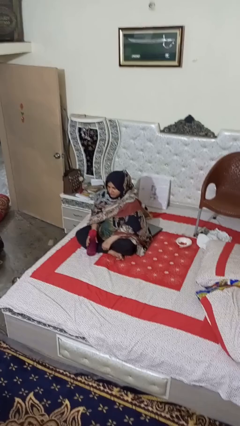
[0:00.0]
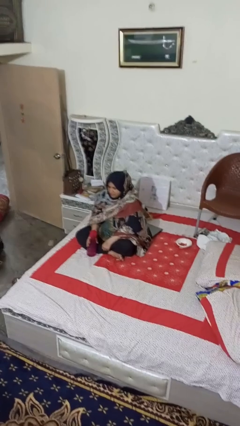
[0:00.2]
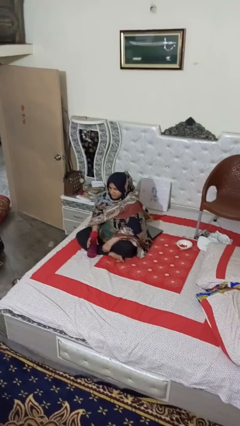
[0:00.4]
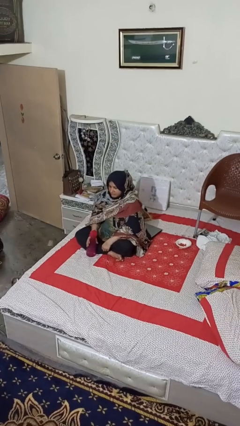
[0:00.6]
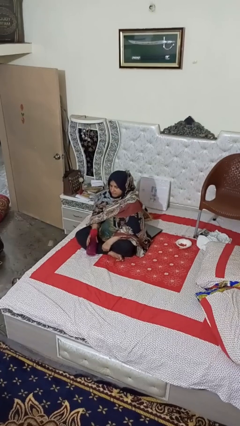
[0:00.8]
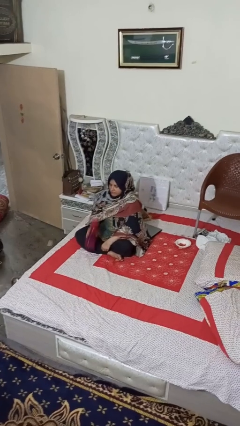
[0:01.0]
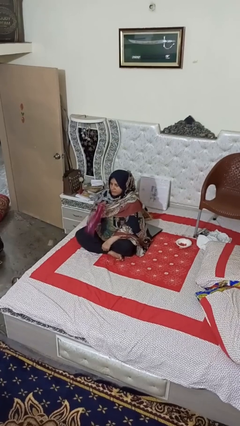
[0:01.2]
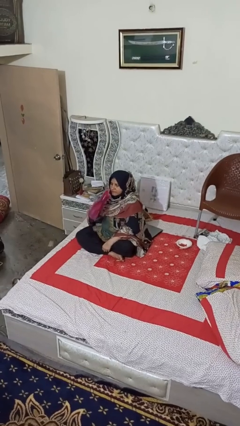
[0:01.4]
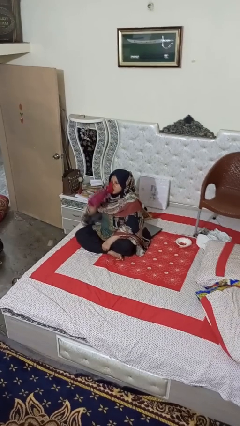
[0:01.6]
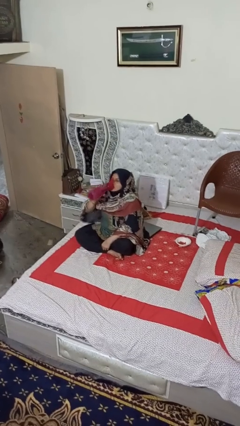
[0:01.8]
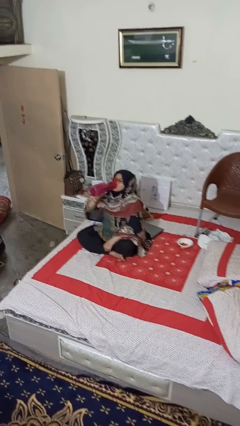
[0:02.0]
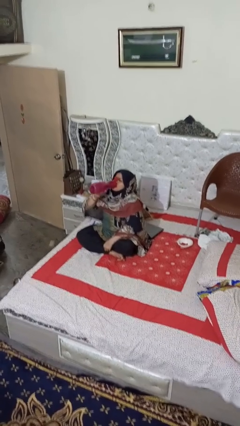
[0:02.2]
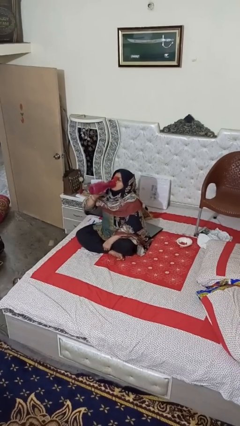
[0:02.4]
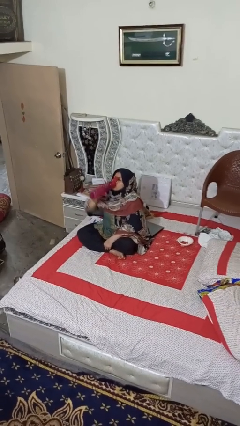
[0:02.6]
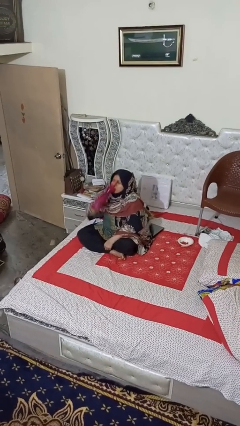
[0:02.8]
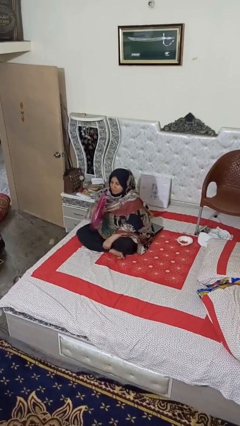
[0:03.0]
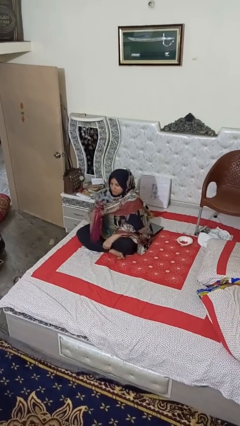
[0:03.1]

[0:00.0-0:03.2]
person drinks from bottle

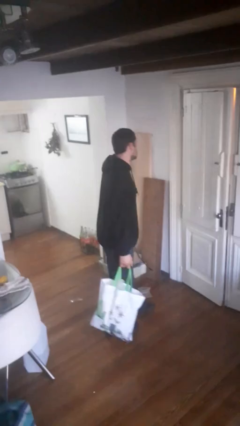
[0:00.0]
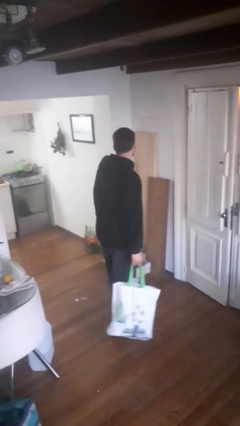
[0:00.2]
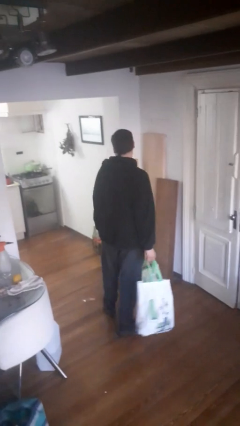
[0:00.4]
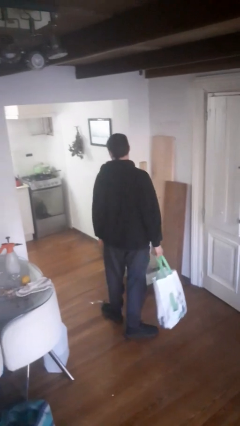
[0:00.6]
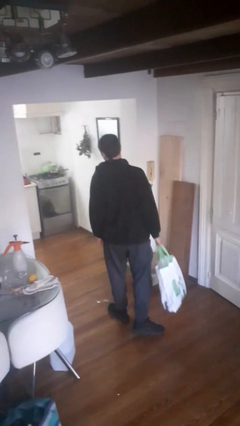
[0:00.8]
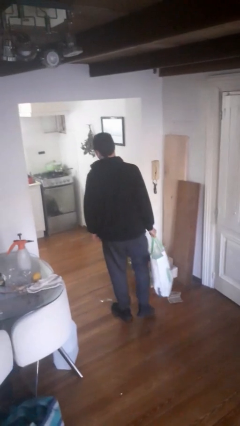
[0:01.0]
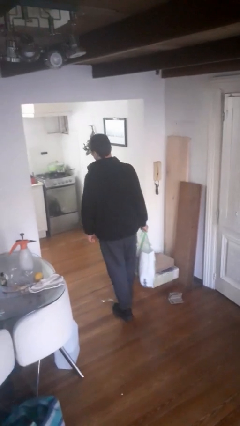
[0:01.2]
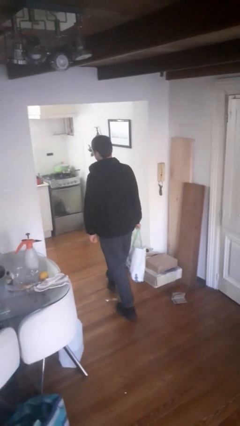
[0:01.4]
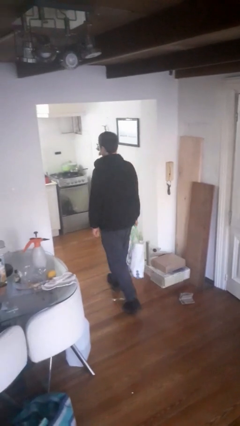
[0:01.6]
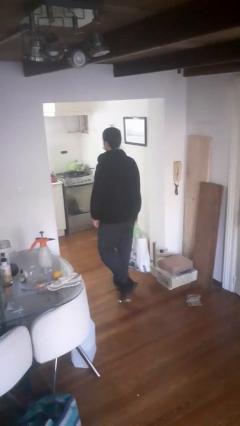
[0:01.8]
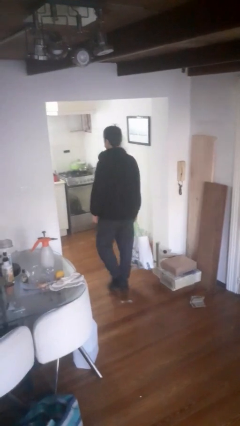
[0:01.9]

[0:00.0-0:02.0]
person carries groceries

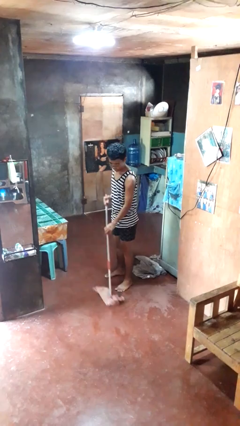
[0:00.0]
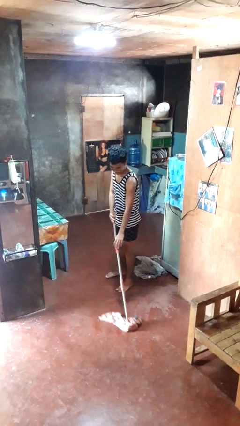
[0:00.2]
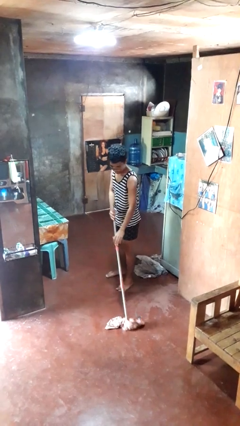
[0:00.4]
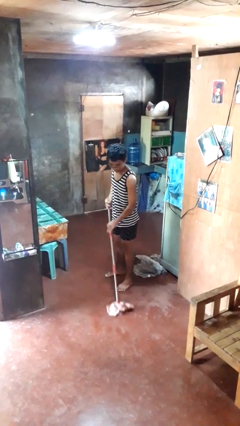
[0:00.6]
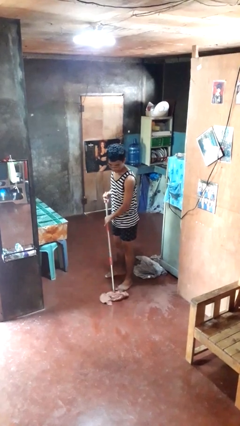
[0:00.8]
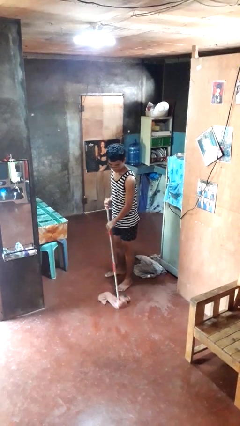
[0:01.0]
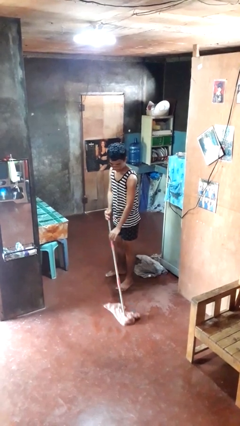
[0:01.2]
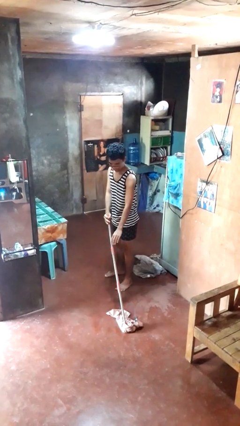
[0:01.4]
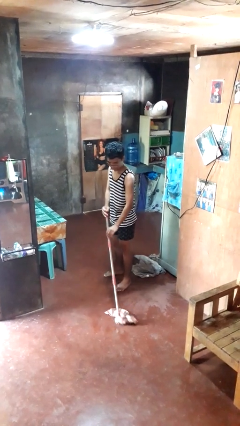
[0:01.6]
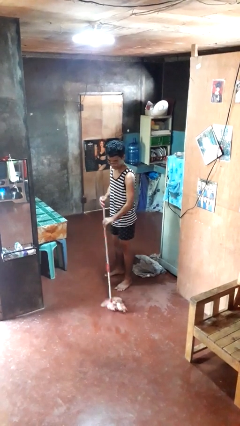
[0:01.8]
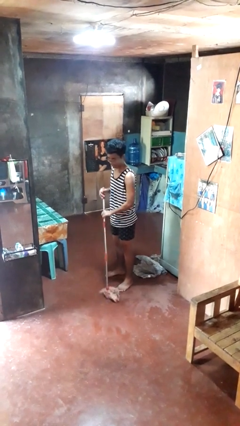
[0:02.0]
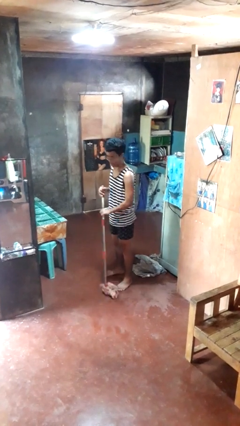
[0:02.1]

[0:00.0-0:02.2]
person mops

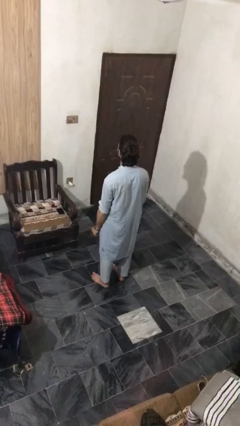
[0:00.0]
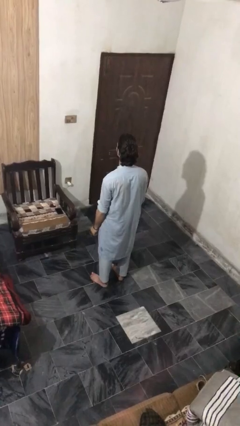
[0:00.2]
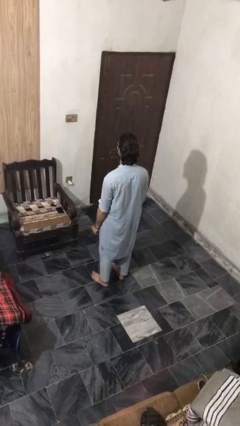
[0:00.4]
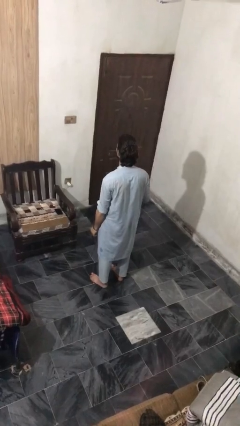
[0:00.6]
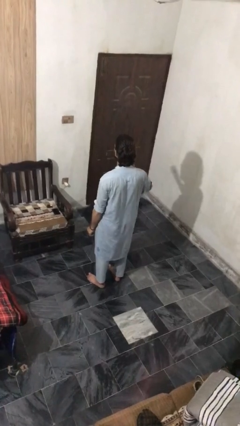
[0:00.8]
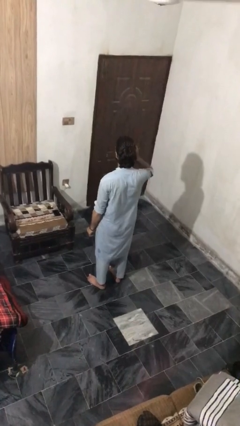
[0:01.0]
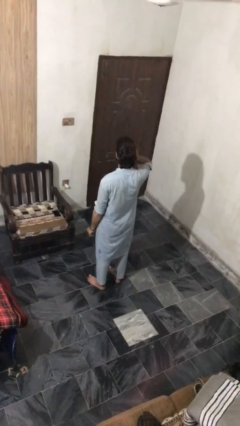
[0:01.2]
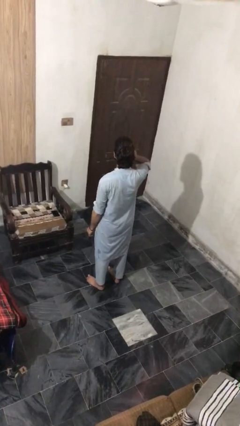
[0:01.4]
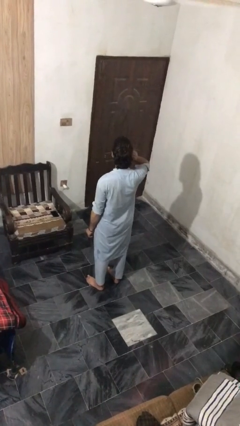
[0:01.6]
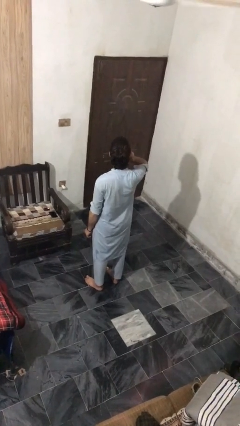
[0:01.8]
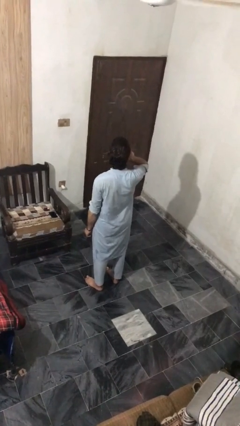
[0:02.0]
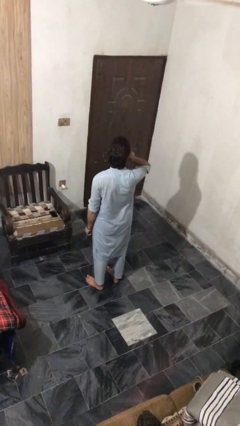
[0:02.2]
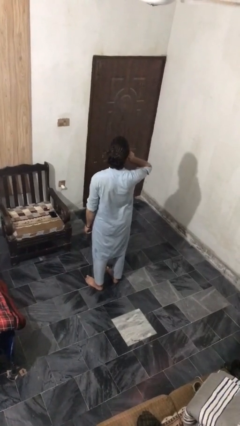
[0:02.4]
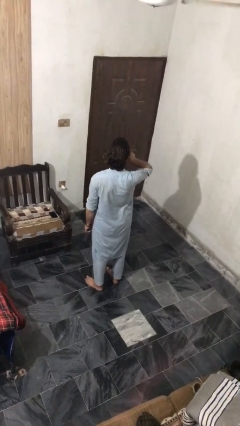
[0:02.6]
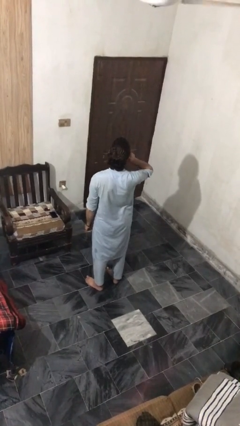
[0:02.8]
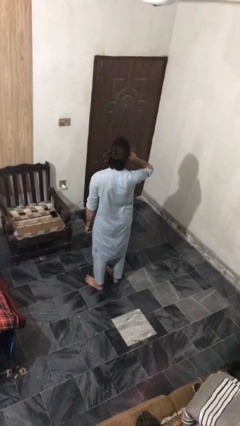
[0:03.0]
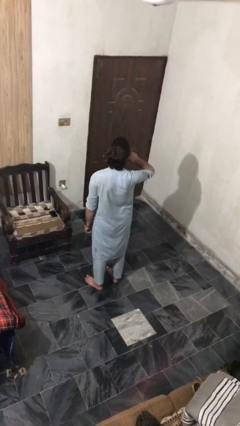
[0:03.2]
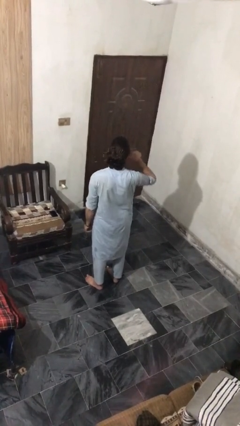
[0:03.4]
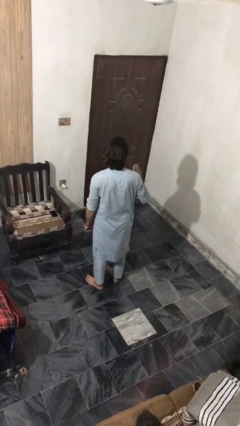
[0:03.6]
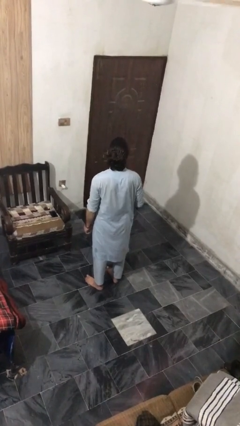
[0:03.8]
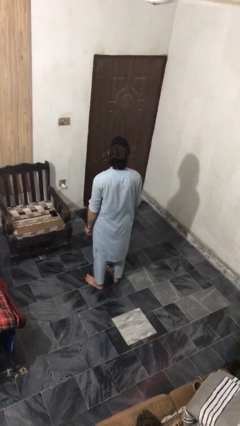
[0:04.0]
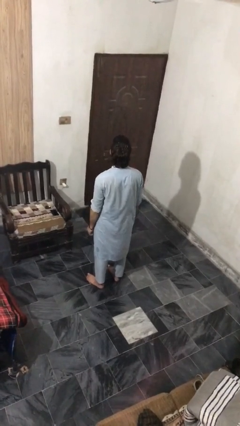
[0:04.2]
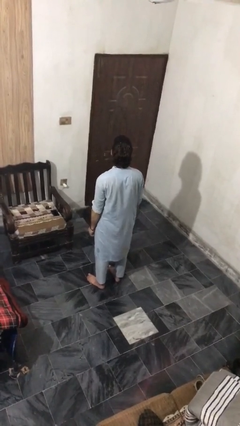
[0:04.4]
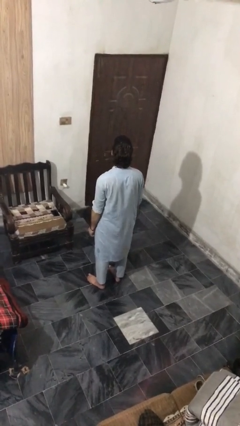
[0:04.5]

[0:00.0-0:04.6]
person touches earlobe

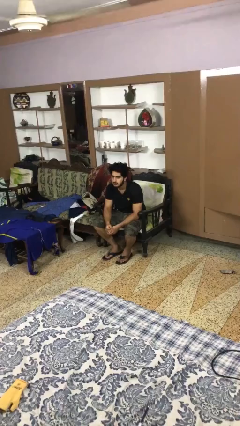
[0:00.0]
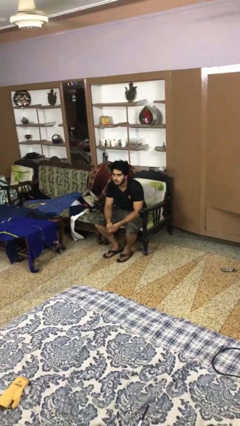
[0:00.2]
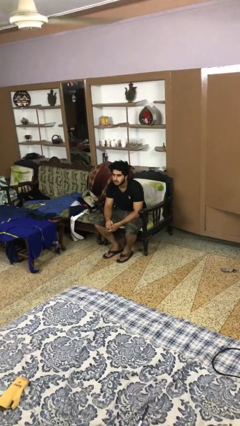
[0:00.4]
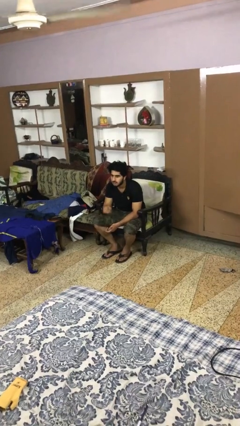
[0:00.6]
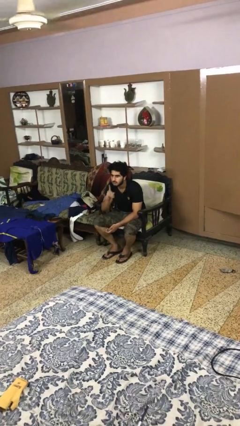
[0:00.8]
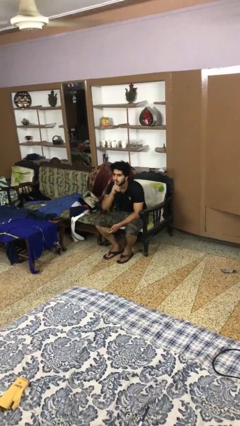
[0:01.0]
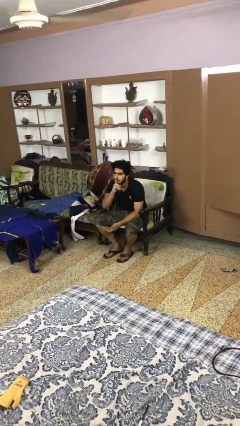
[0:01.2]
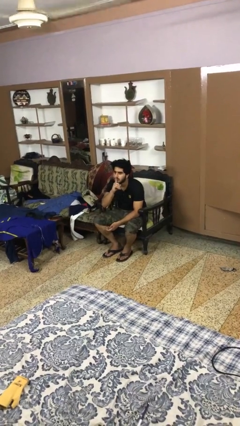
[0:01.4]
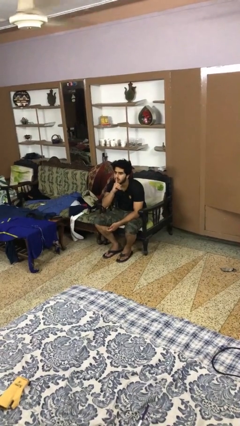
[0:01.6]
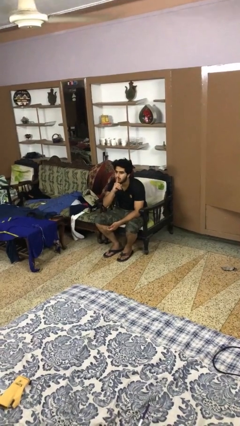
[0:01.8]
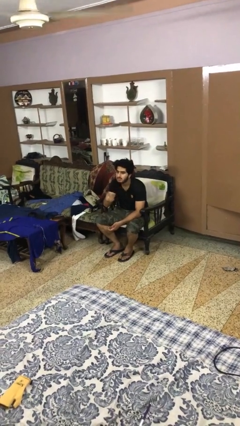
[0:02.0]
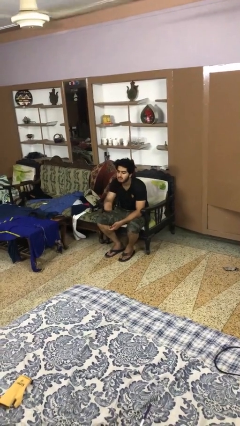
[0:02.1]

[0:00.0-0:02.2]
person gestures be quiet

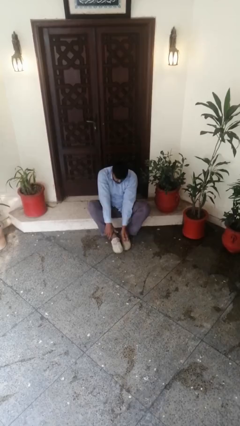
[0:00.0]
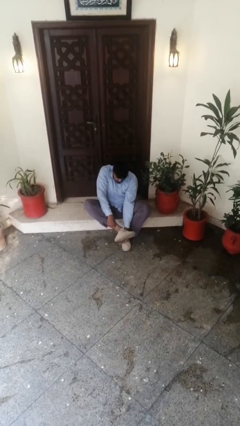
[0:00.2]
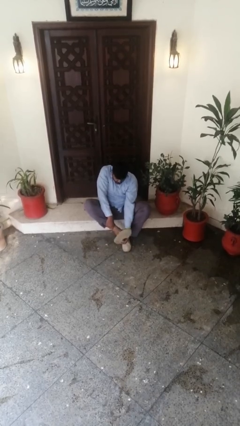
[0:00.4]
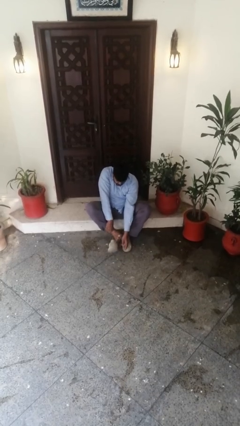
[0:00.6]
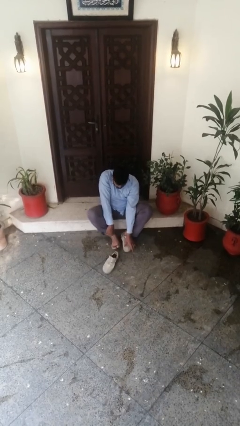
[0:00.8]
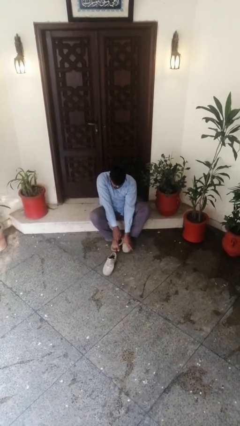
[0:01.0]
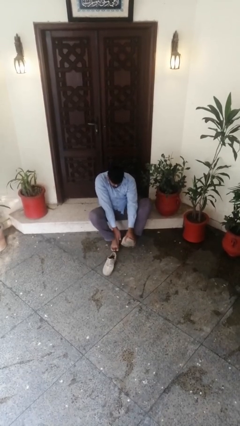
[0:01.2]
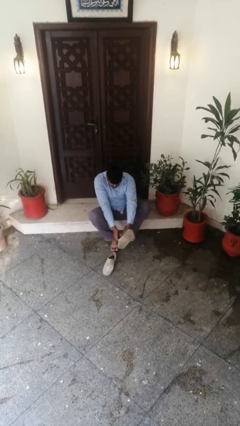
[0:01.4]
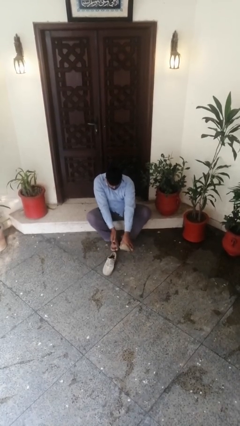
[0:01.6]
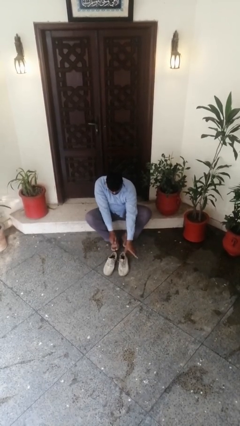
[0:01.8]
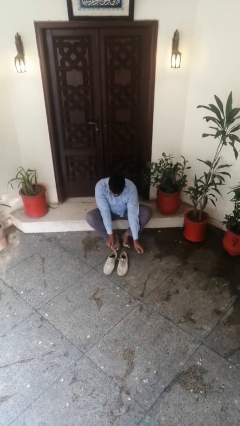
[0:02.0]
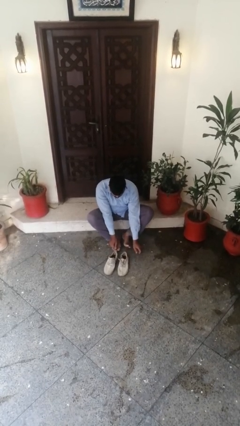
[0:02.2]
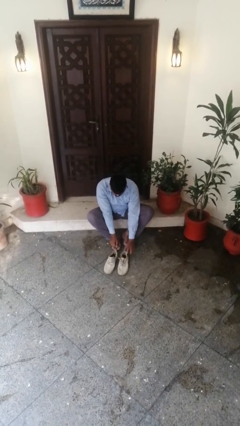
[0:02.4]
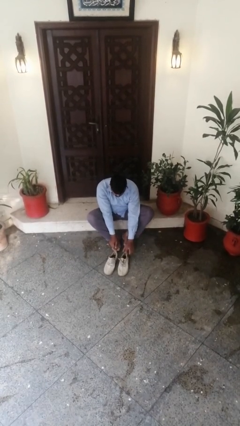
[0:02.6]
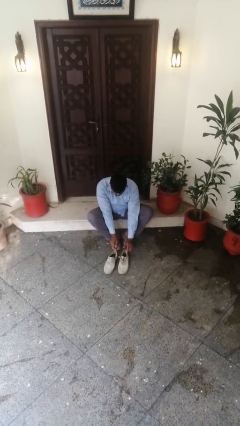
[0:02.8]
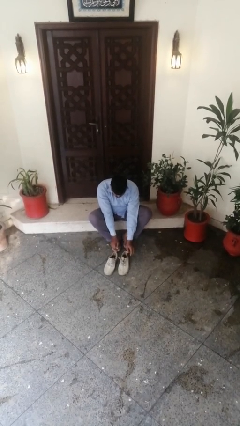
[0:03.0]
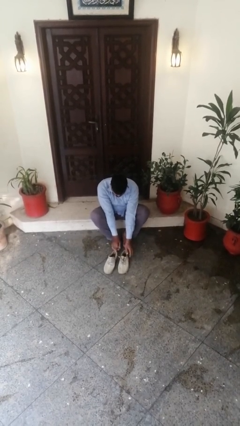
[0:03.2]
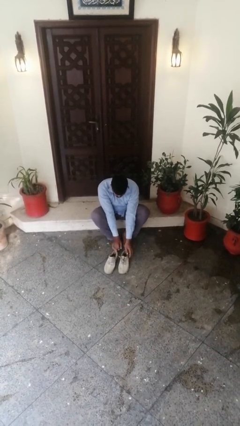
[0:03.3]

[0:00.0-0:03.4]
person takes off shoes
